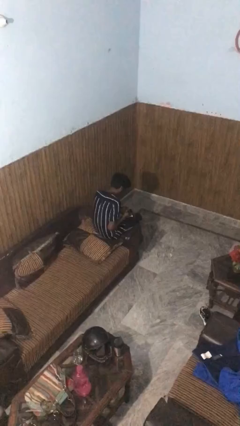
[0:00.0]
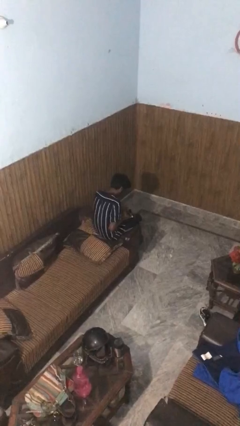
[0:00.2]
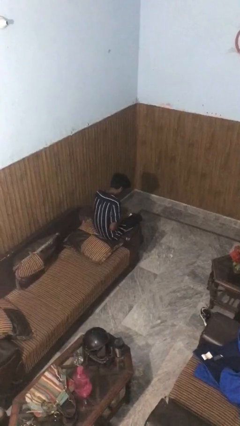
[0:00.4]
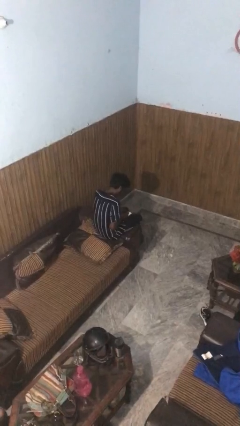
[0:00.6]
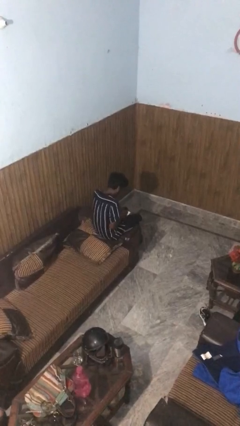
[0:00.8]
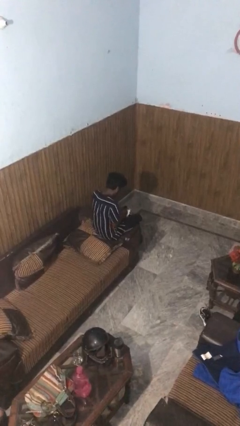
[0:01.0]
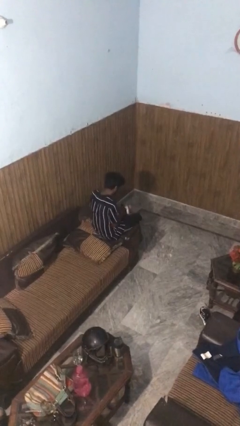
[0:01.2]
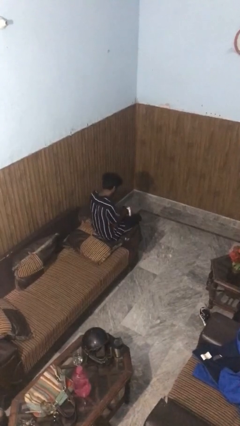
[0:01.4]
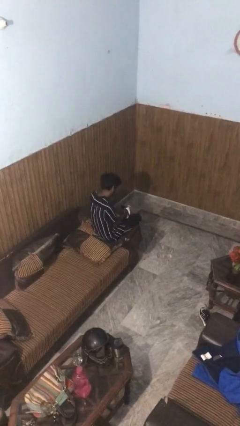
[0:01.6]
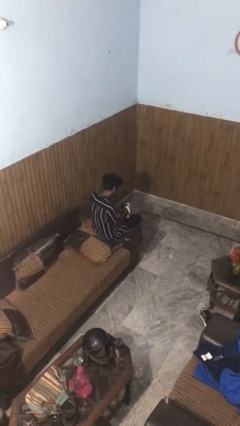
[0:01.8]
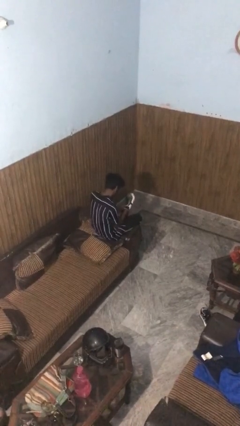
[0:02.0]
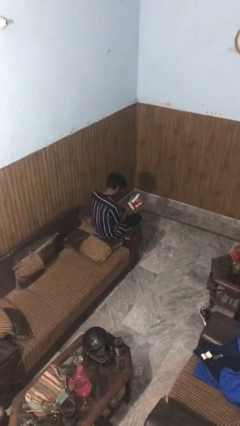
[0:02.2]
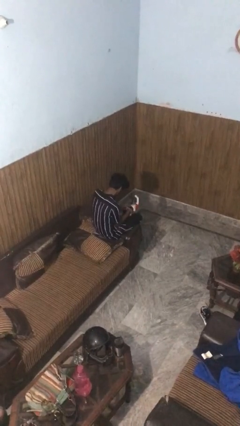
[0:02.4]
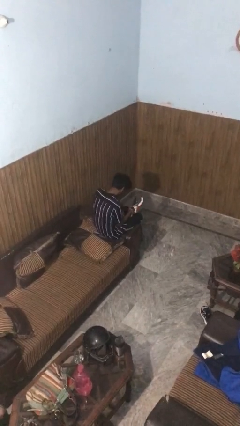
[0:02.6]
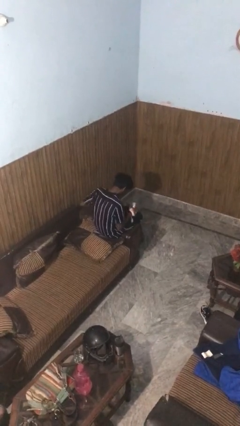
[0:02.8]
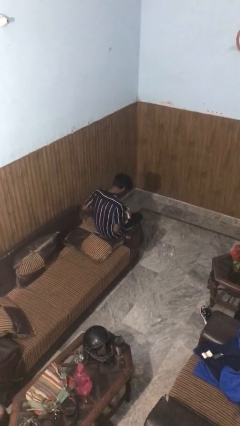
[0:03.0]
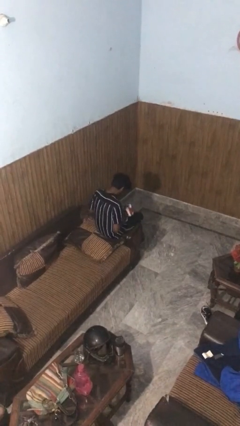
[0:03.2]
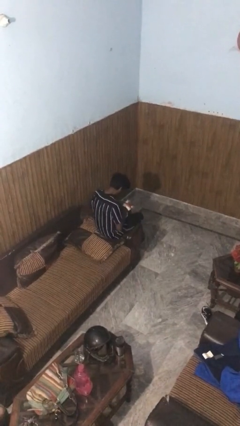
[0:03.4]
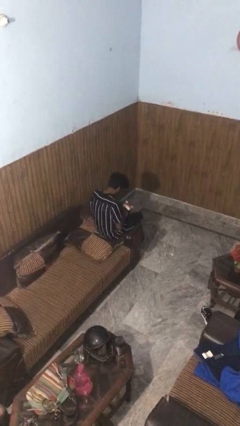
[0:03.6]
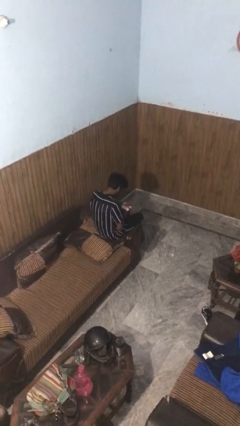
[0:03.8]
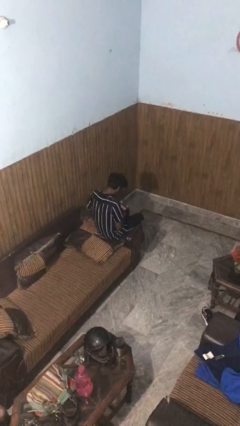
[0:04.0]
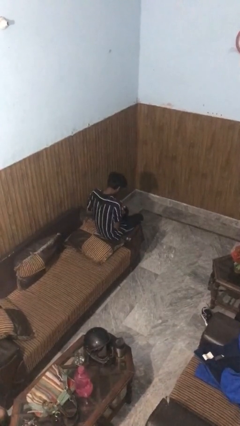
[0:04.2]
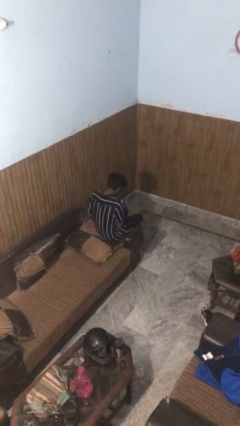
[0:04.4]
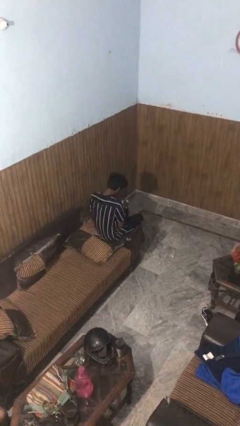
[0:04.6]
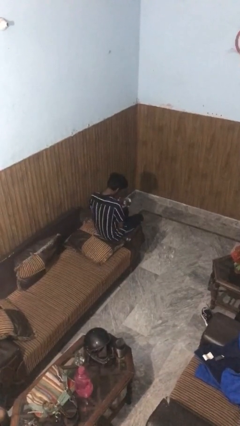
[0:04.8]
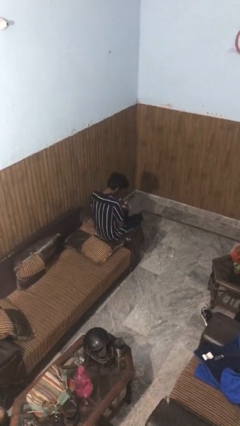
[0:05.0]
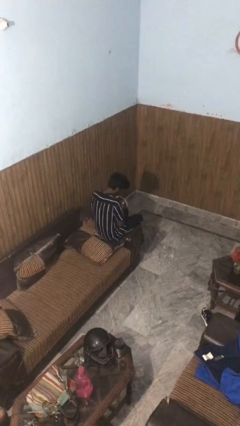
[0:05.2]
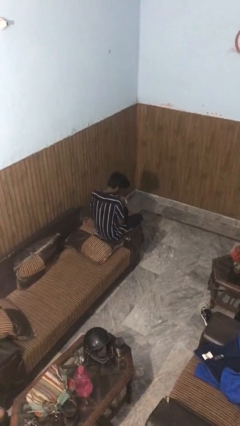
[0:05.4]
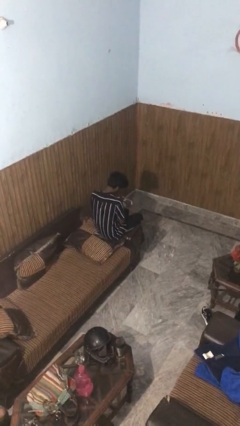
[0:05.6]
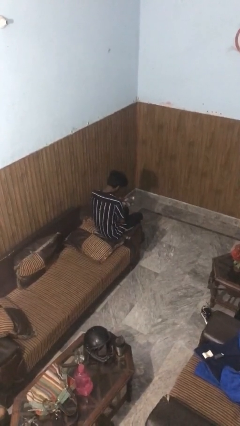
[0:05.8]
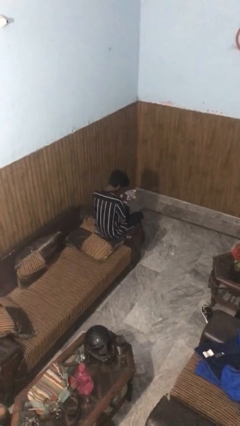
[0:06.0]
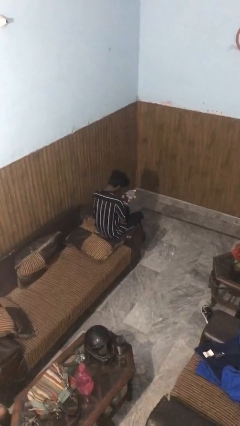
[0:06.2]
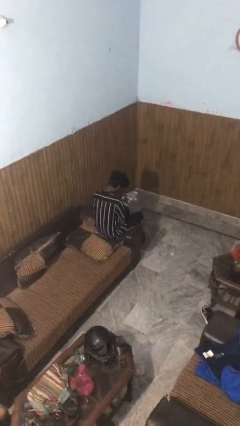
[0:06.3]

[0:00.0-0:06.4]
person puts on gloves

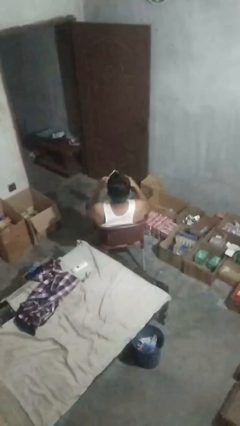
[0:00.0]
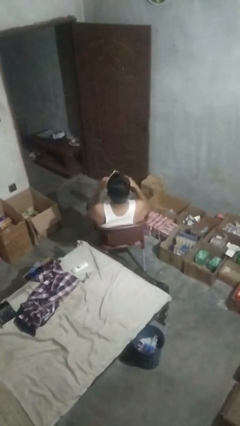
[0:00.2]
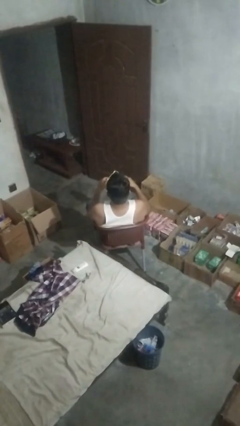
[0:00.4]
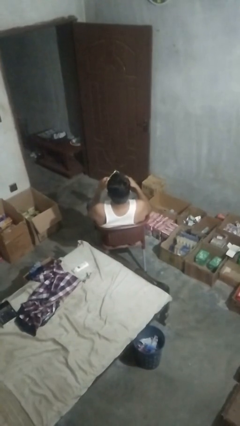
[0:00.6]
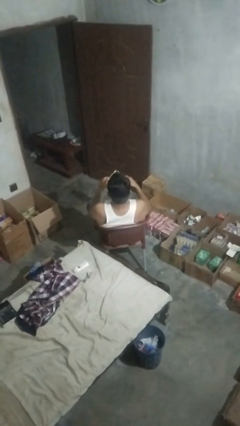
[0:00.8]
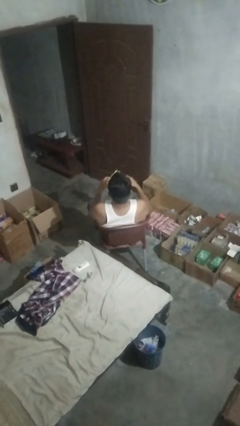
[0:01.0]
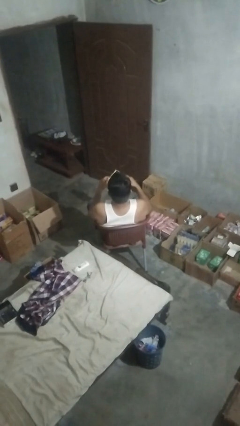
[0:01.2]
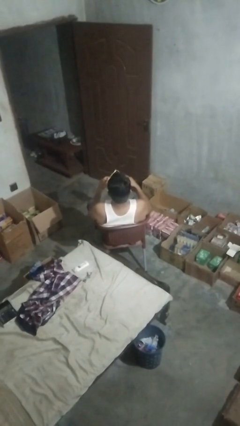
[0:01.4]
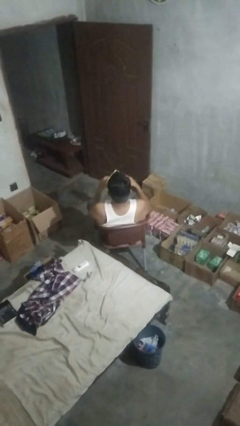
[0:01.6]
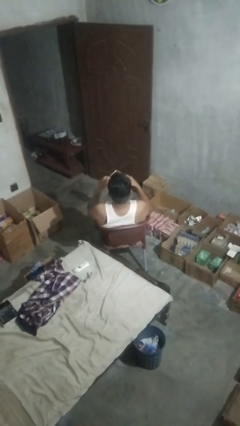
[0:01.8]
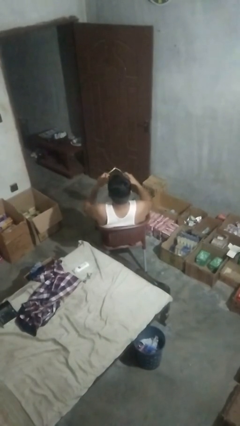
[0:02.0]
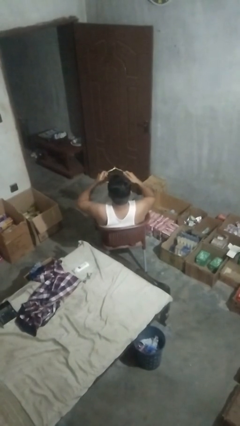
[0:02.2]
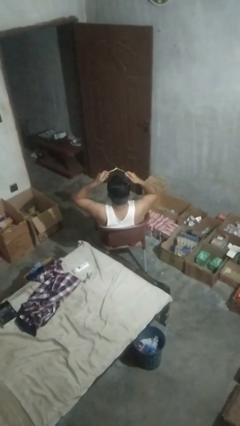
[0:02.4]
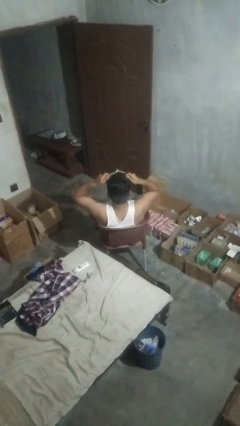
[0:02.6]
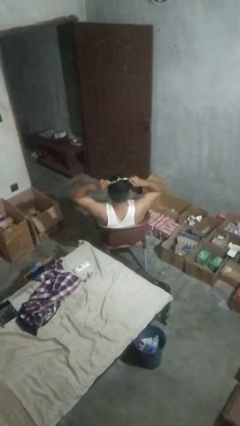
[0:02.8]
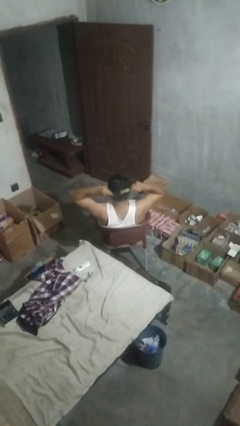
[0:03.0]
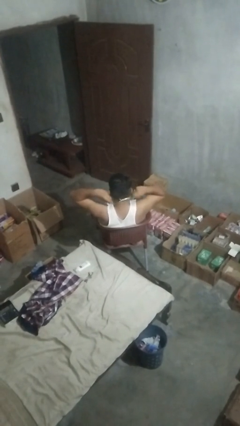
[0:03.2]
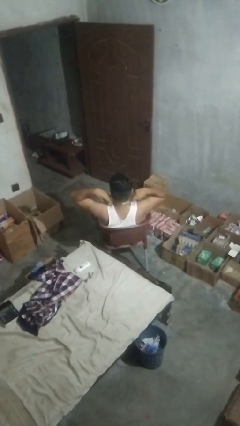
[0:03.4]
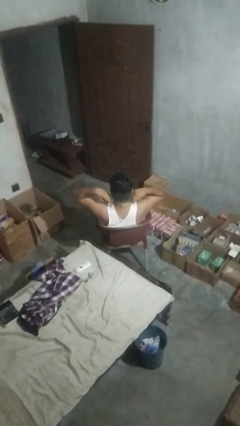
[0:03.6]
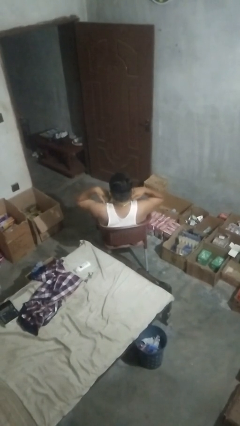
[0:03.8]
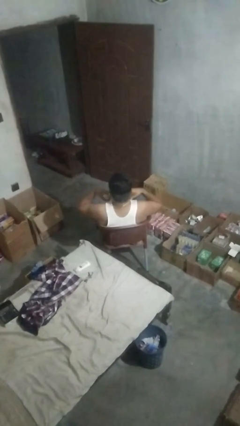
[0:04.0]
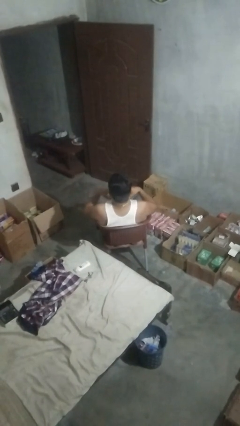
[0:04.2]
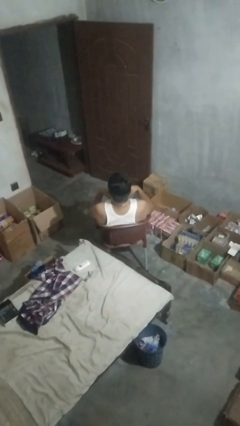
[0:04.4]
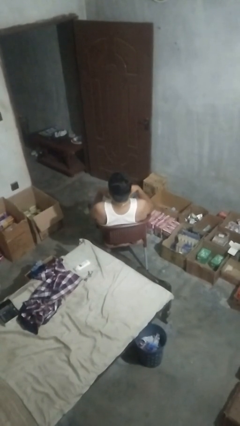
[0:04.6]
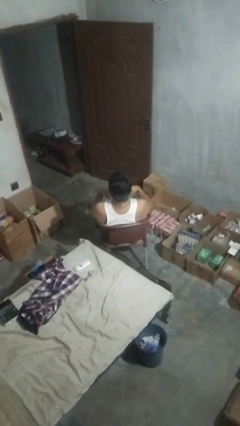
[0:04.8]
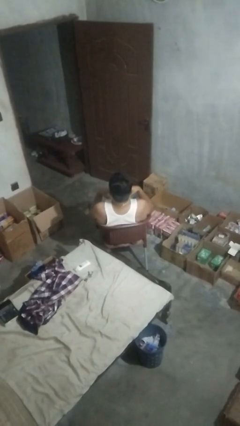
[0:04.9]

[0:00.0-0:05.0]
person puts on necklace

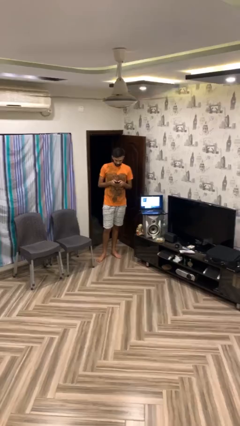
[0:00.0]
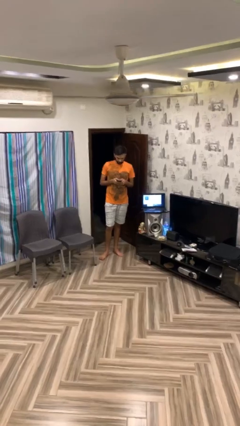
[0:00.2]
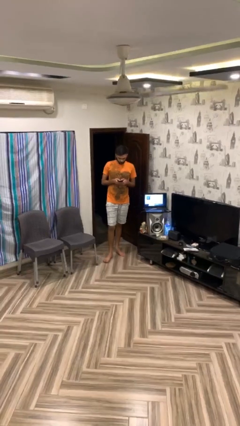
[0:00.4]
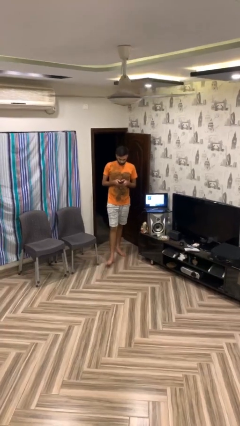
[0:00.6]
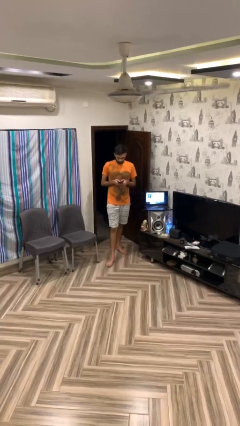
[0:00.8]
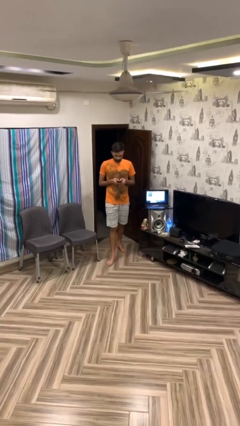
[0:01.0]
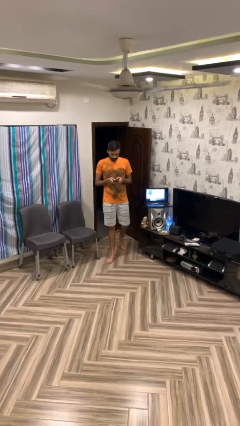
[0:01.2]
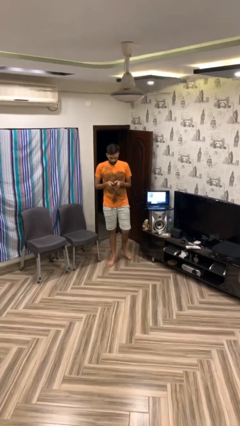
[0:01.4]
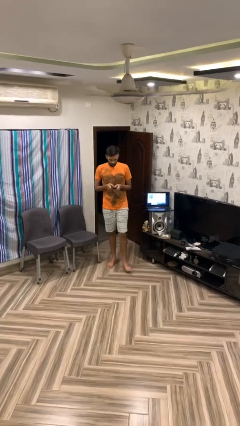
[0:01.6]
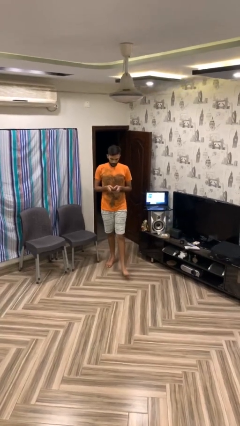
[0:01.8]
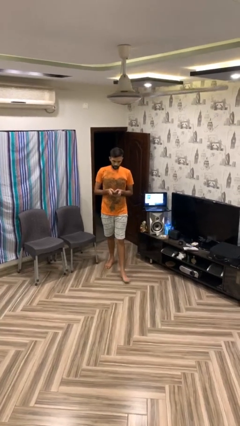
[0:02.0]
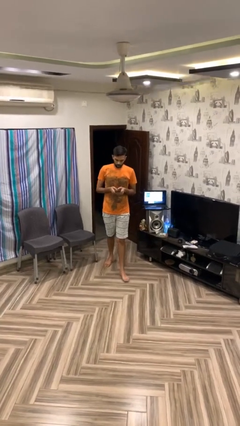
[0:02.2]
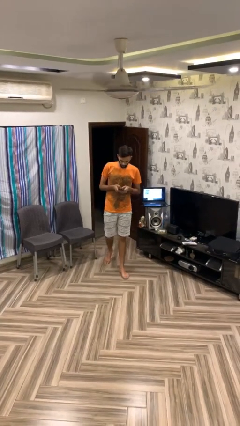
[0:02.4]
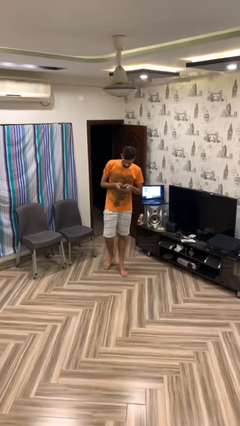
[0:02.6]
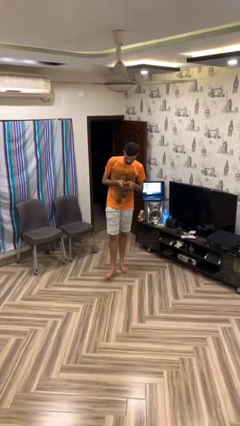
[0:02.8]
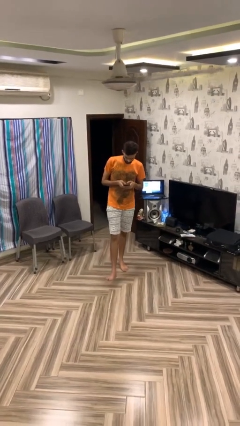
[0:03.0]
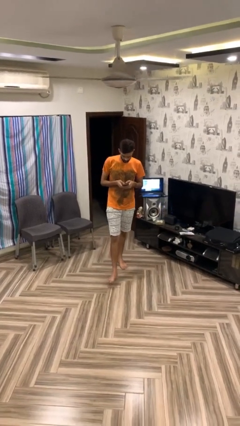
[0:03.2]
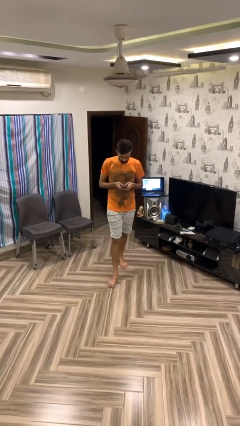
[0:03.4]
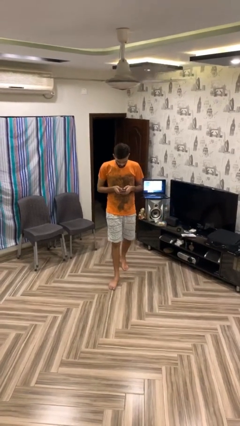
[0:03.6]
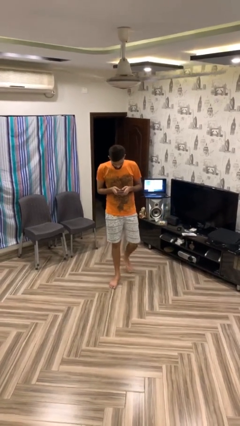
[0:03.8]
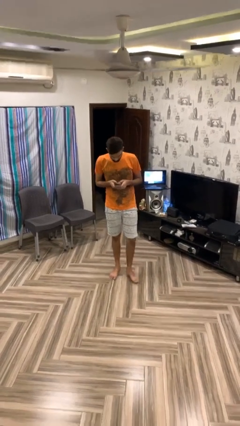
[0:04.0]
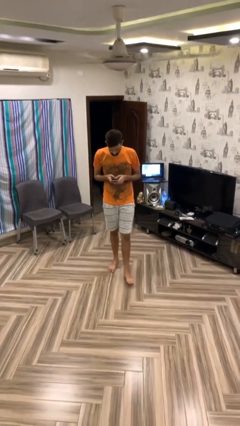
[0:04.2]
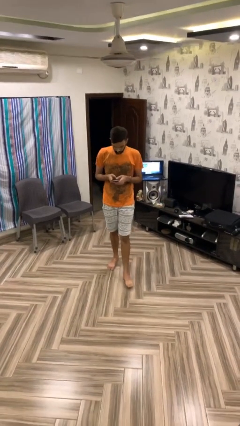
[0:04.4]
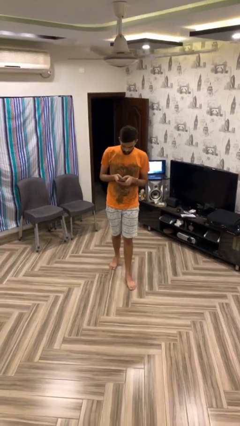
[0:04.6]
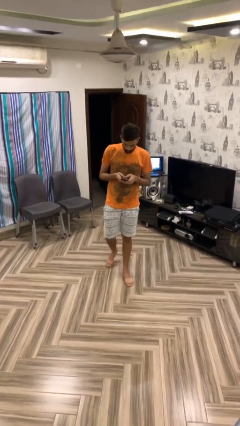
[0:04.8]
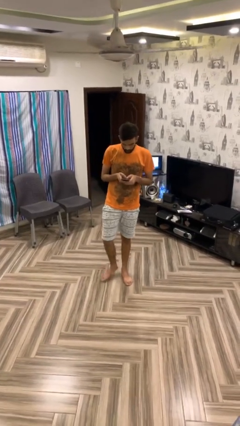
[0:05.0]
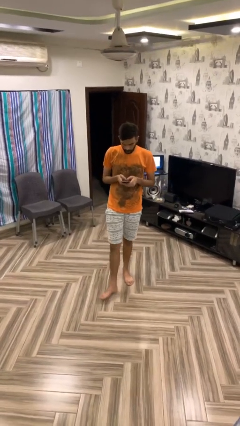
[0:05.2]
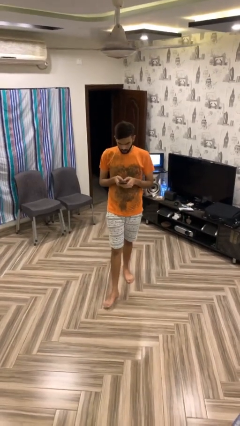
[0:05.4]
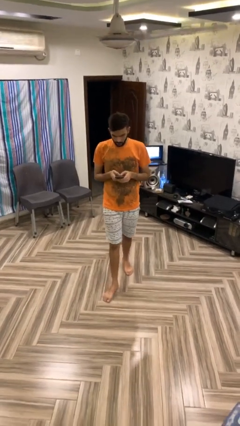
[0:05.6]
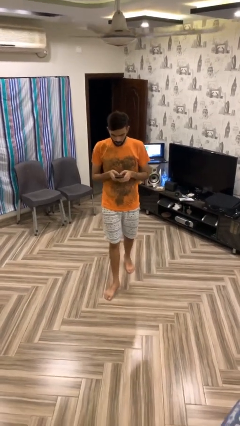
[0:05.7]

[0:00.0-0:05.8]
person texts on phone

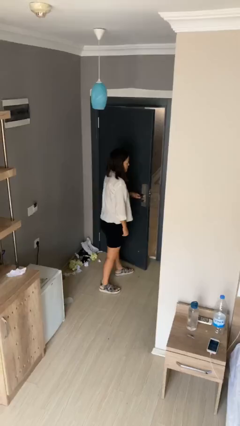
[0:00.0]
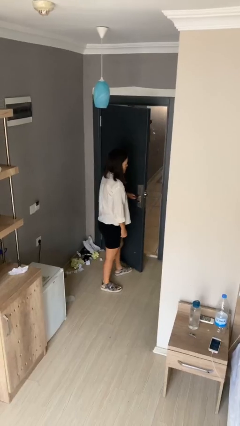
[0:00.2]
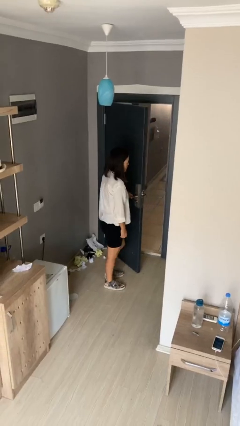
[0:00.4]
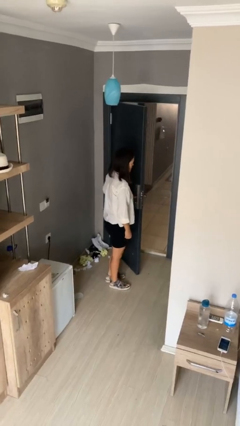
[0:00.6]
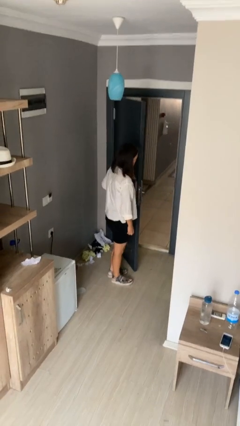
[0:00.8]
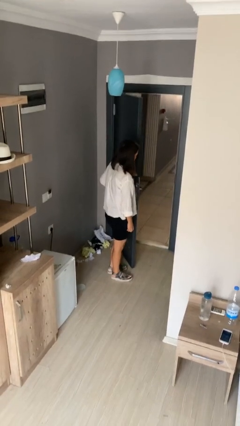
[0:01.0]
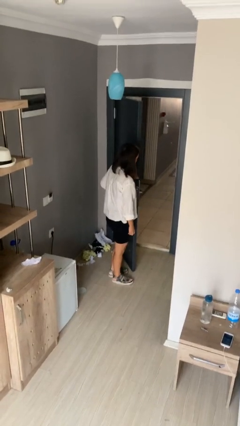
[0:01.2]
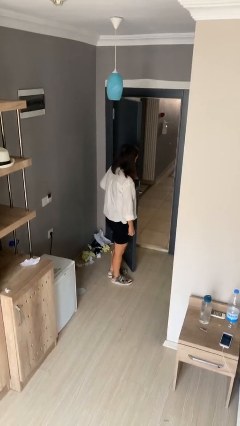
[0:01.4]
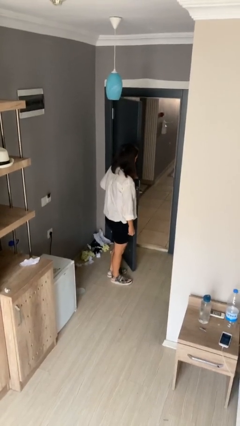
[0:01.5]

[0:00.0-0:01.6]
person opens facility door
